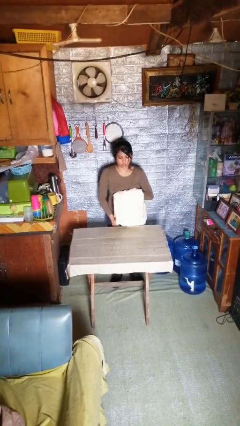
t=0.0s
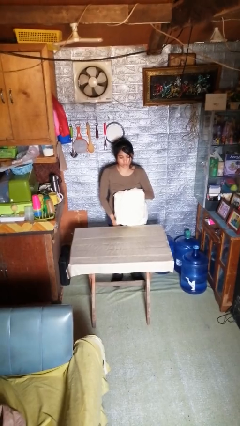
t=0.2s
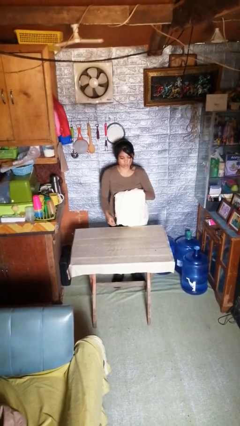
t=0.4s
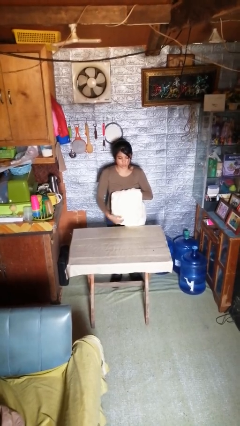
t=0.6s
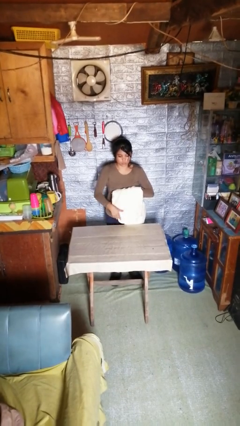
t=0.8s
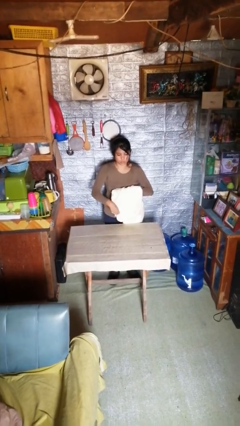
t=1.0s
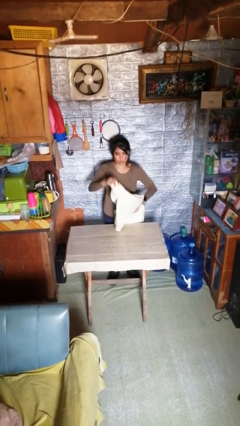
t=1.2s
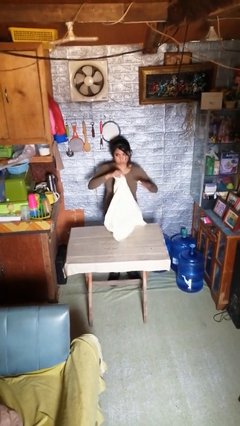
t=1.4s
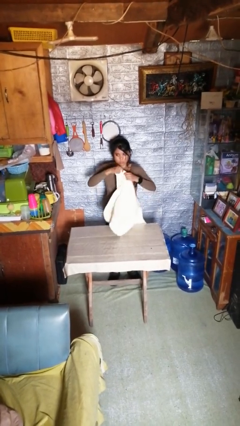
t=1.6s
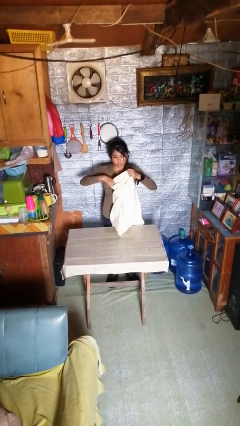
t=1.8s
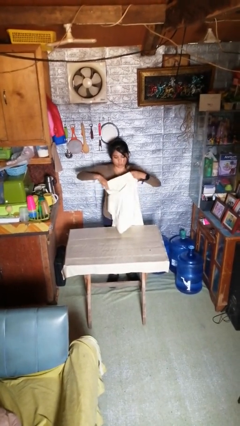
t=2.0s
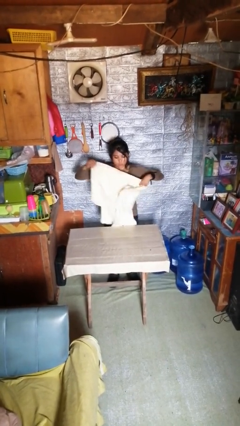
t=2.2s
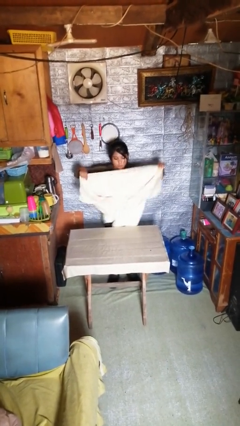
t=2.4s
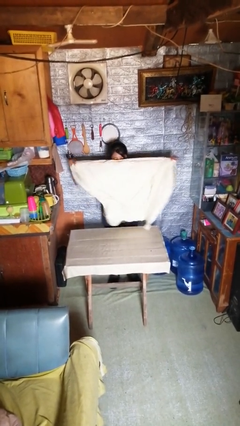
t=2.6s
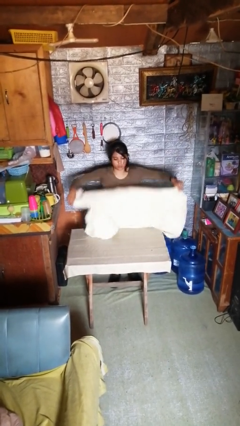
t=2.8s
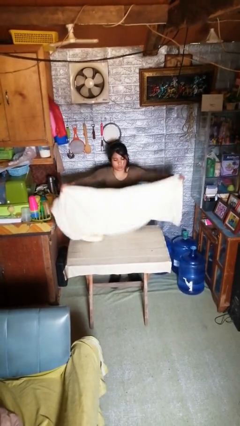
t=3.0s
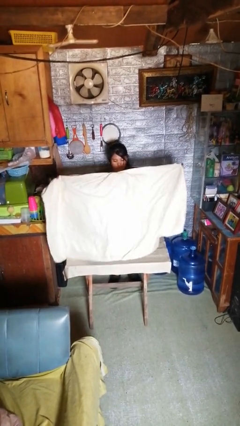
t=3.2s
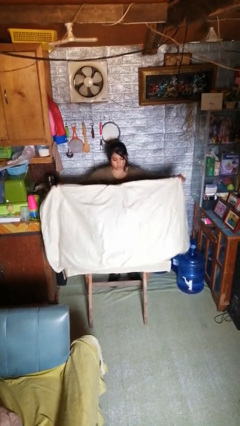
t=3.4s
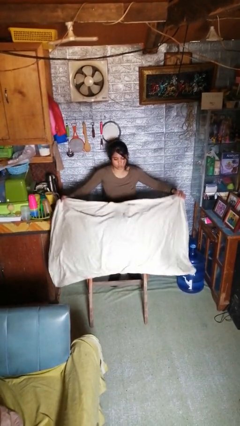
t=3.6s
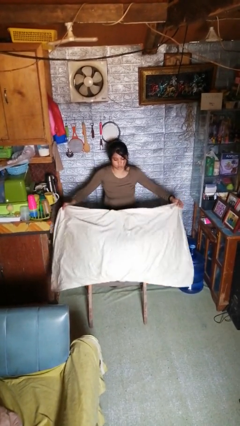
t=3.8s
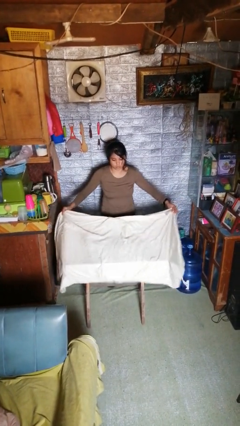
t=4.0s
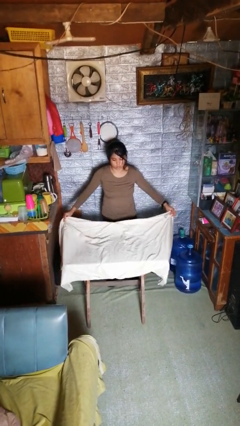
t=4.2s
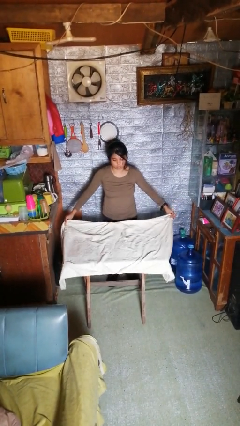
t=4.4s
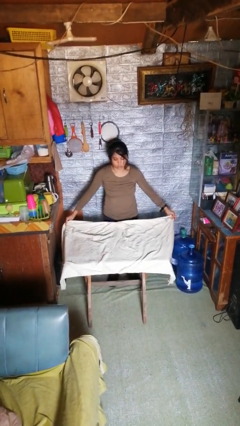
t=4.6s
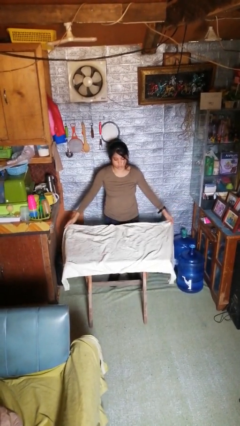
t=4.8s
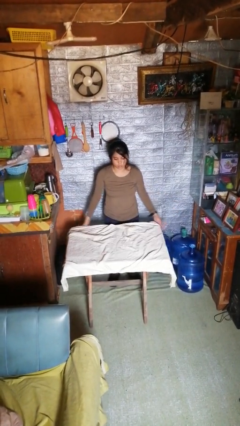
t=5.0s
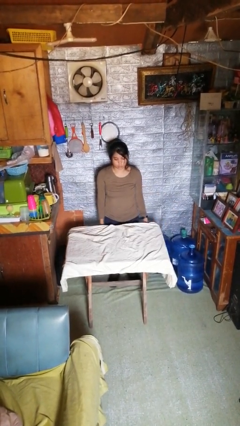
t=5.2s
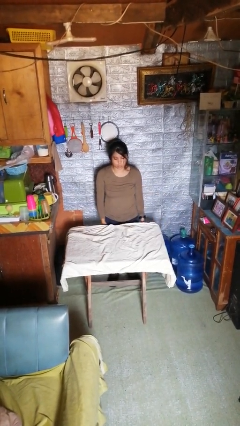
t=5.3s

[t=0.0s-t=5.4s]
person spreads tablecloth

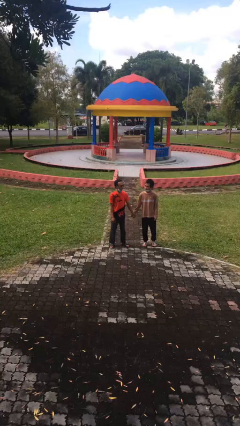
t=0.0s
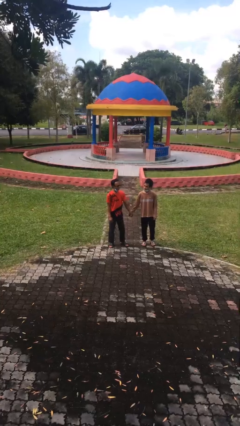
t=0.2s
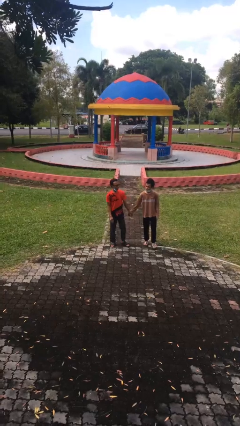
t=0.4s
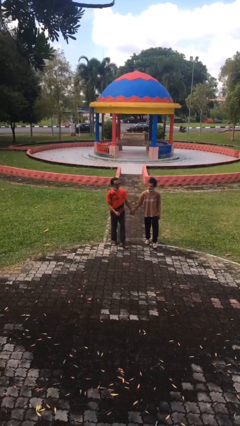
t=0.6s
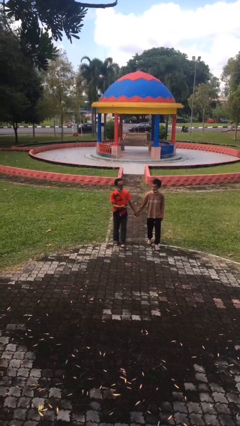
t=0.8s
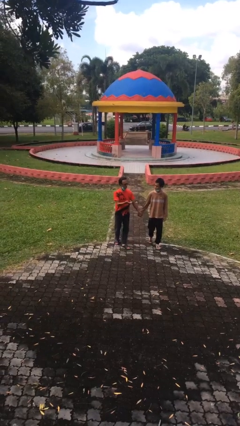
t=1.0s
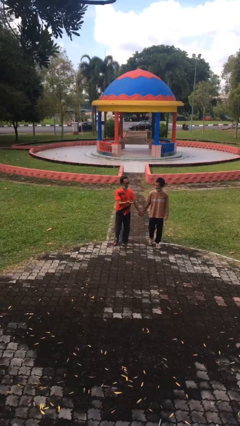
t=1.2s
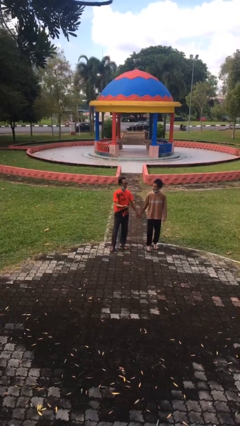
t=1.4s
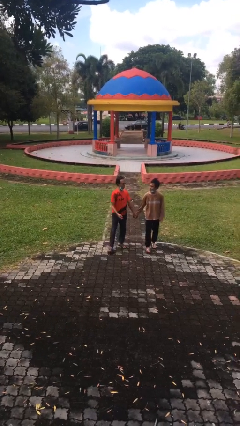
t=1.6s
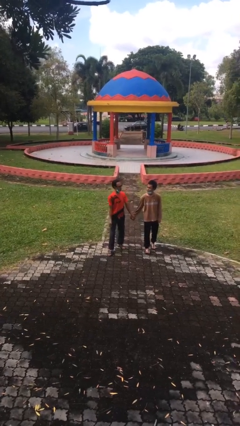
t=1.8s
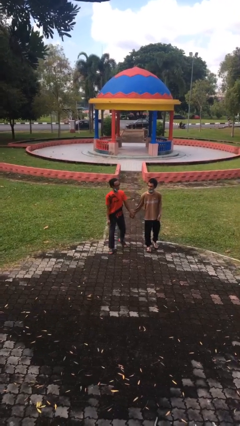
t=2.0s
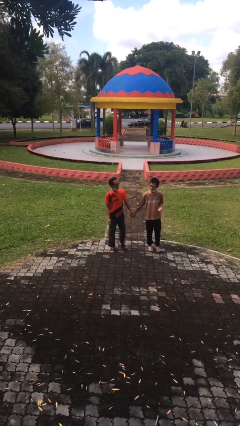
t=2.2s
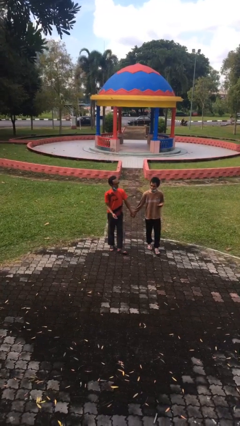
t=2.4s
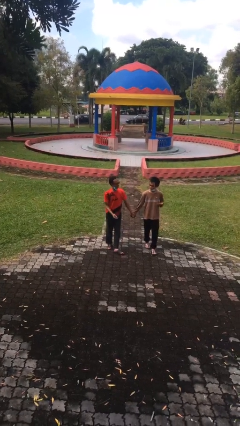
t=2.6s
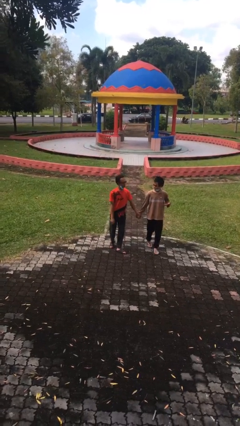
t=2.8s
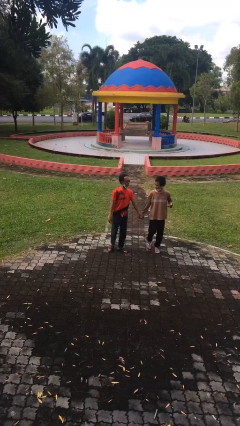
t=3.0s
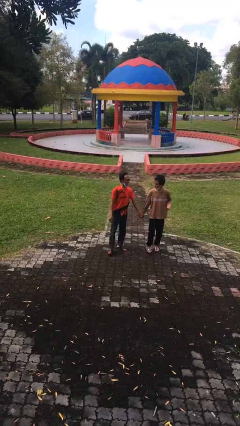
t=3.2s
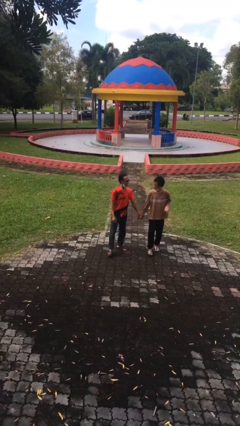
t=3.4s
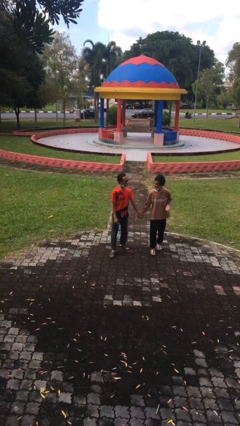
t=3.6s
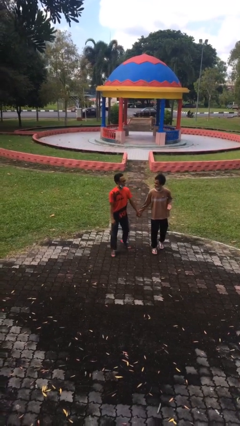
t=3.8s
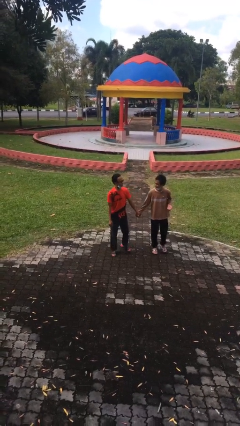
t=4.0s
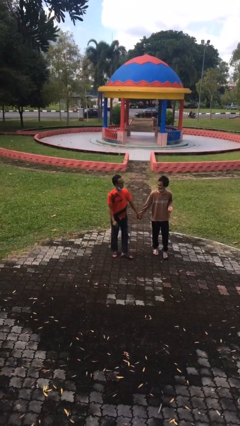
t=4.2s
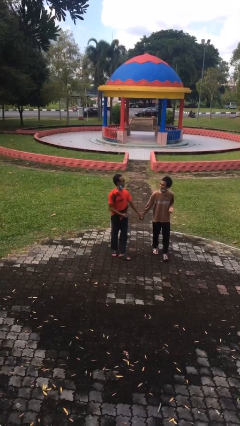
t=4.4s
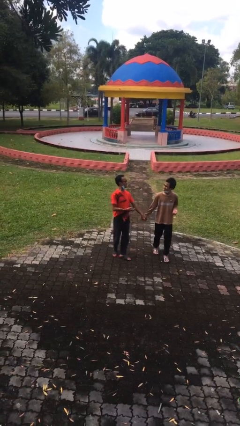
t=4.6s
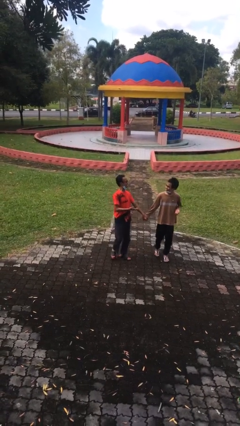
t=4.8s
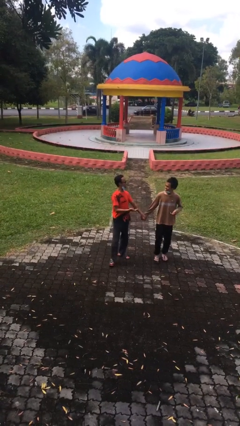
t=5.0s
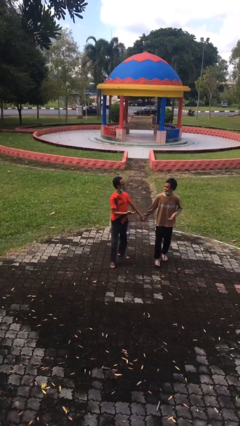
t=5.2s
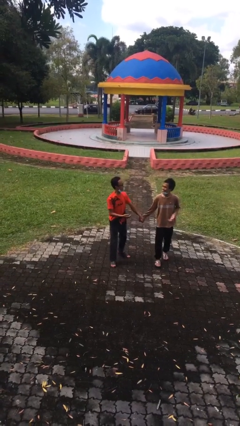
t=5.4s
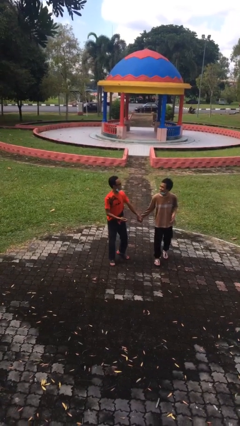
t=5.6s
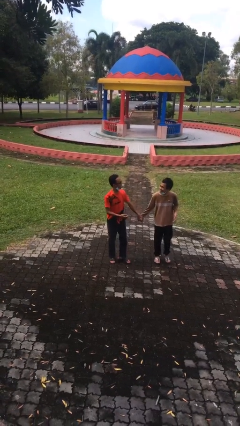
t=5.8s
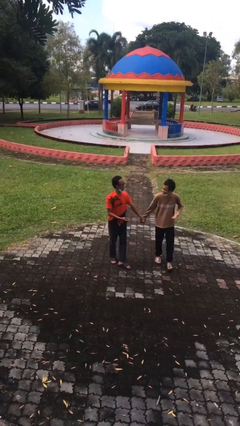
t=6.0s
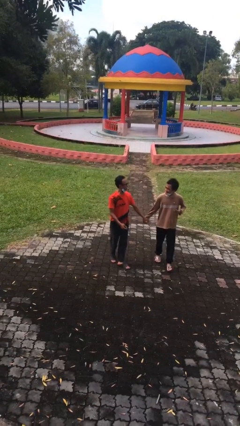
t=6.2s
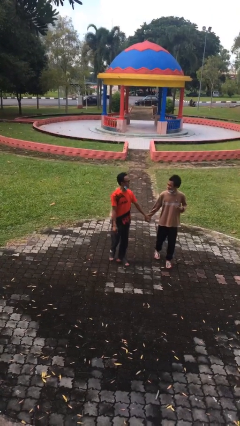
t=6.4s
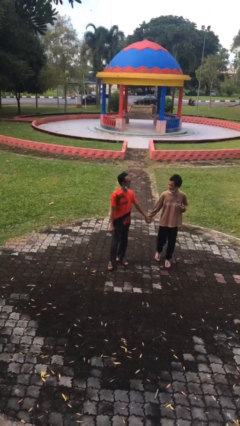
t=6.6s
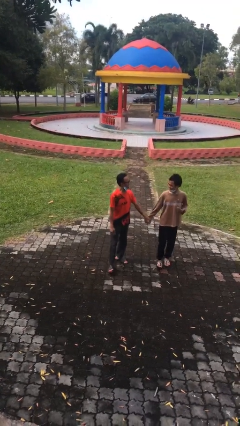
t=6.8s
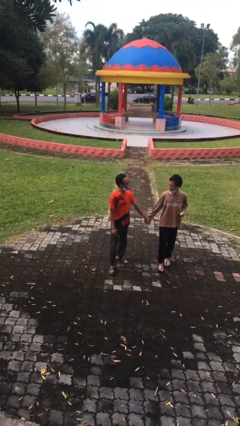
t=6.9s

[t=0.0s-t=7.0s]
person holds hand

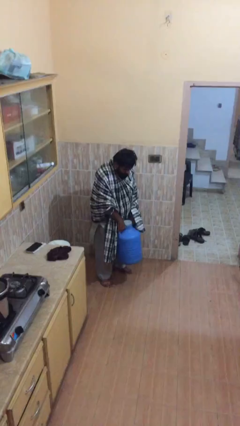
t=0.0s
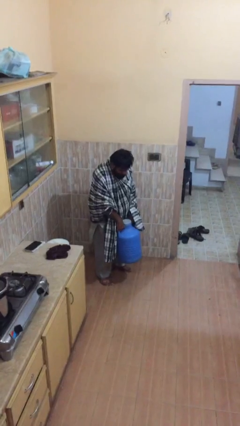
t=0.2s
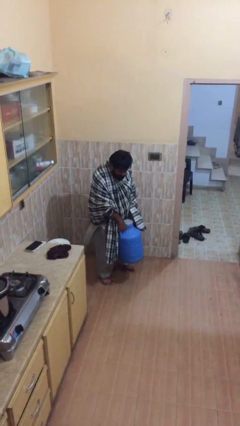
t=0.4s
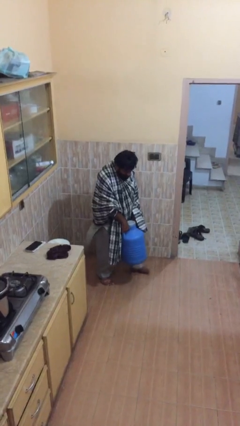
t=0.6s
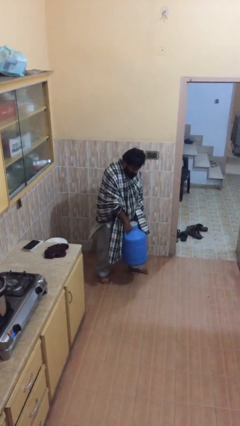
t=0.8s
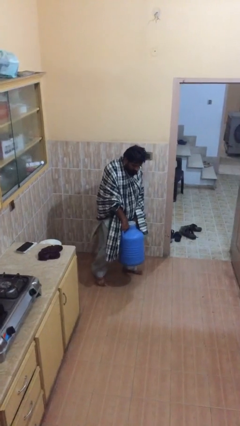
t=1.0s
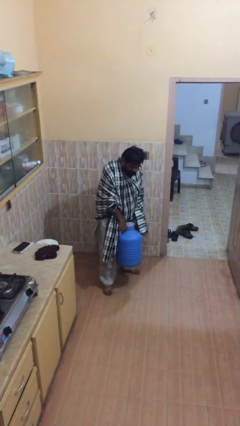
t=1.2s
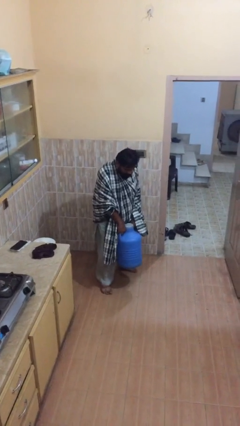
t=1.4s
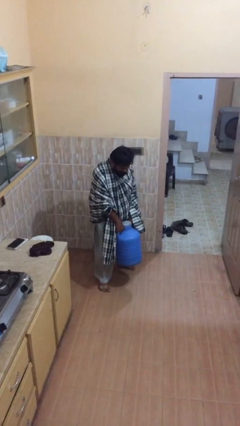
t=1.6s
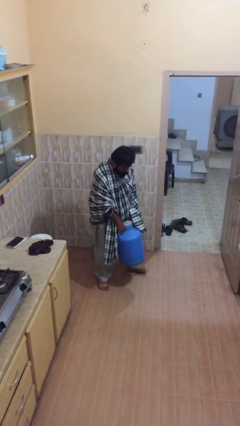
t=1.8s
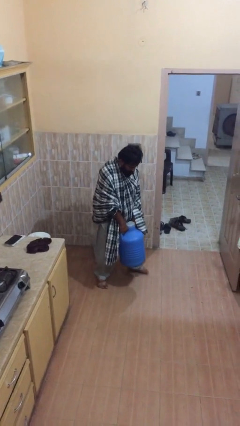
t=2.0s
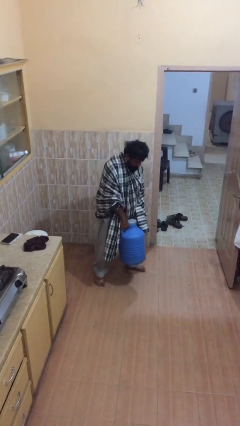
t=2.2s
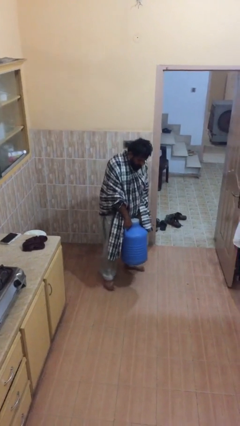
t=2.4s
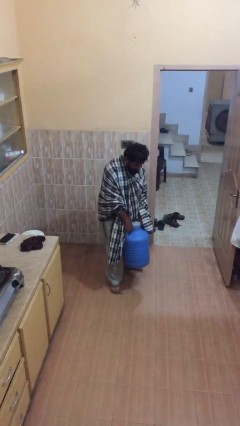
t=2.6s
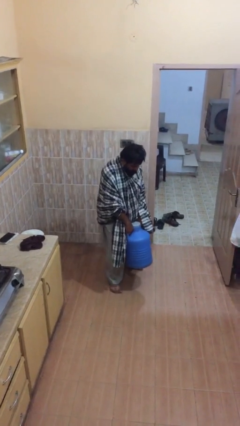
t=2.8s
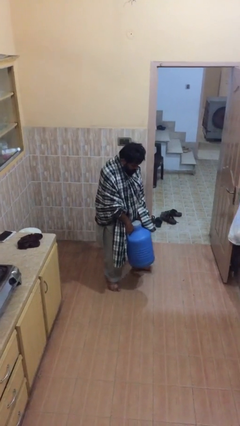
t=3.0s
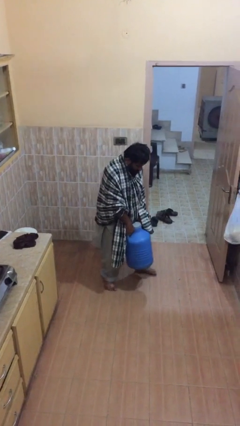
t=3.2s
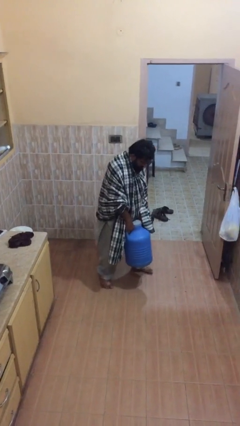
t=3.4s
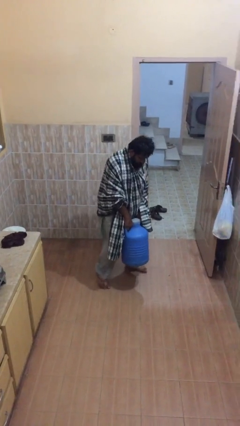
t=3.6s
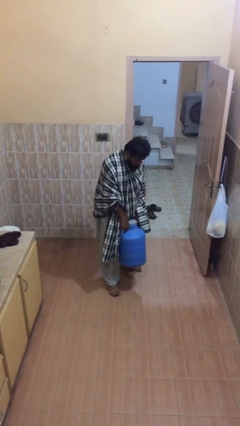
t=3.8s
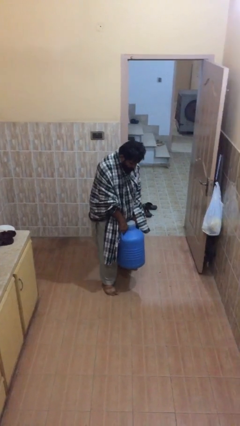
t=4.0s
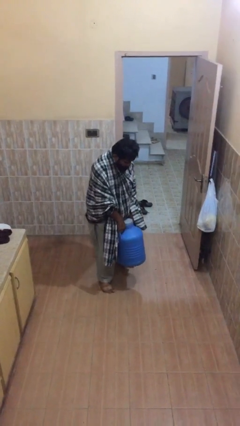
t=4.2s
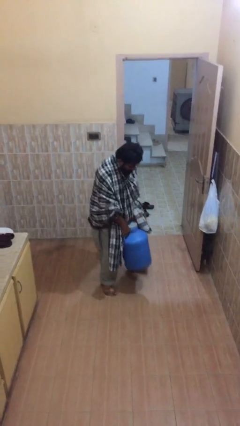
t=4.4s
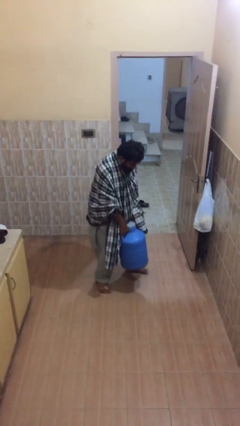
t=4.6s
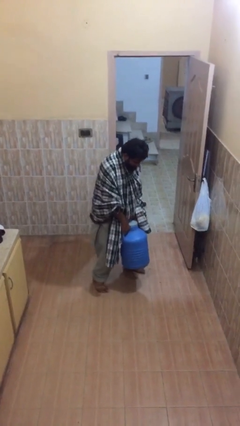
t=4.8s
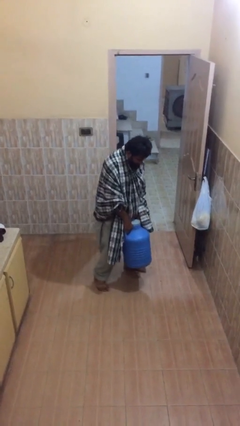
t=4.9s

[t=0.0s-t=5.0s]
person carries heavy object

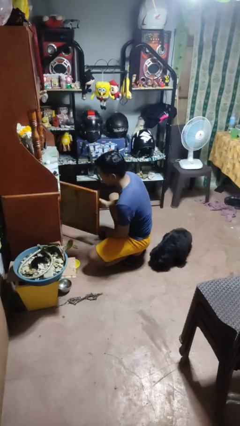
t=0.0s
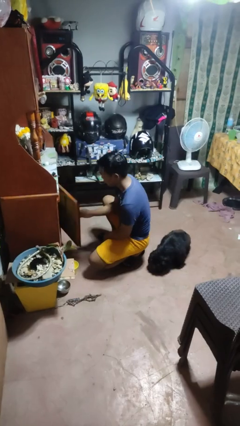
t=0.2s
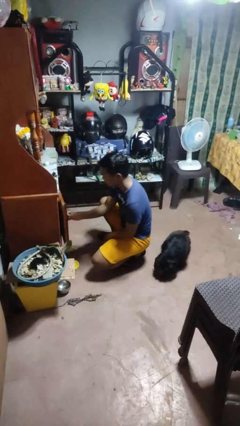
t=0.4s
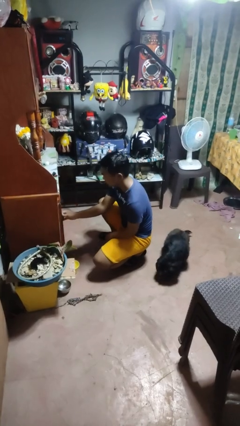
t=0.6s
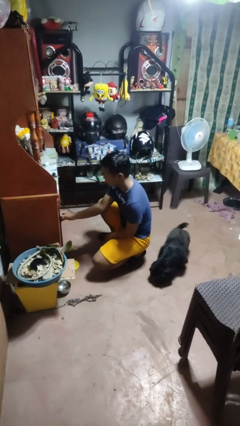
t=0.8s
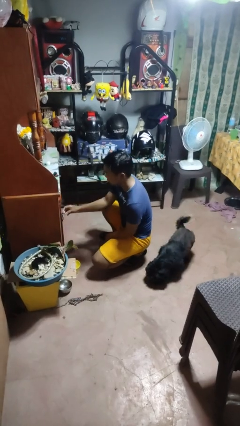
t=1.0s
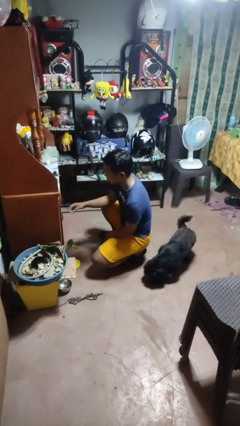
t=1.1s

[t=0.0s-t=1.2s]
person closes cabinet
